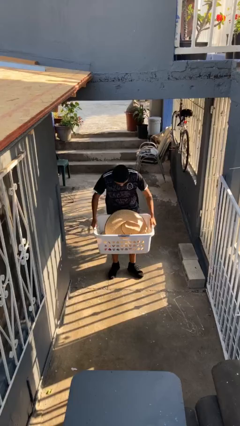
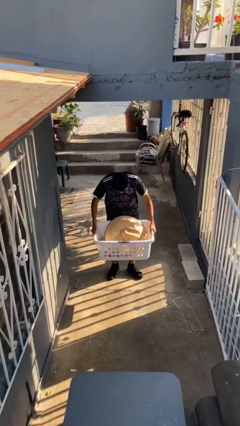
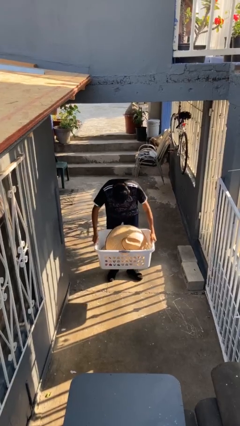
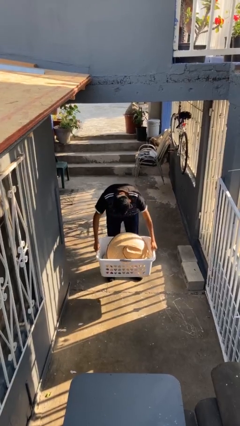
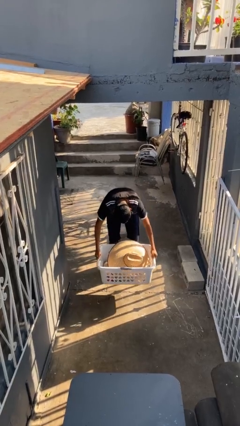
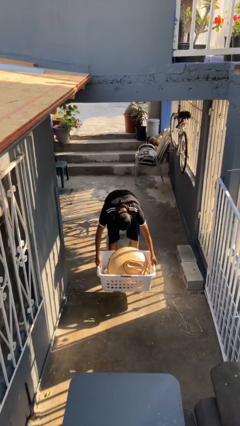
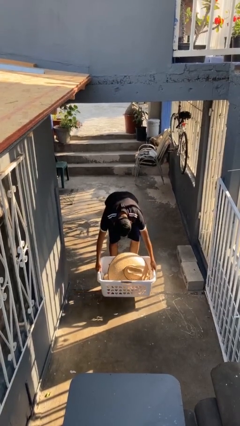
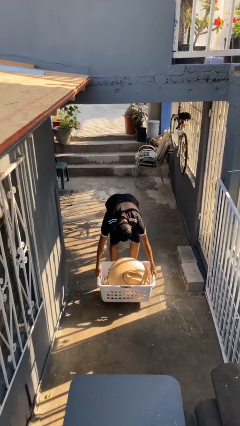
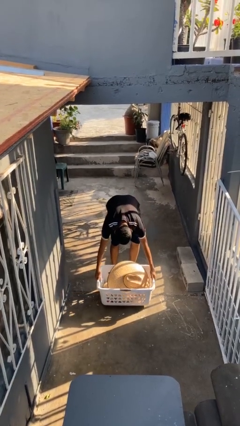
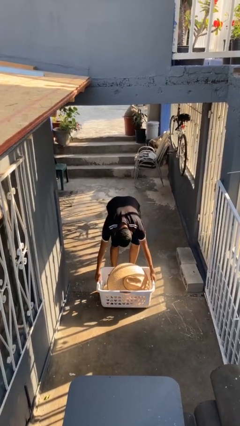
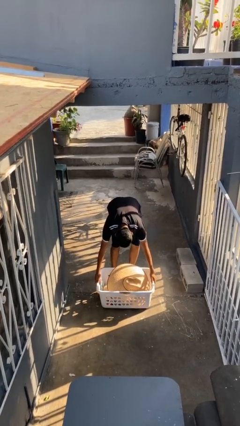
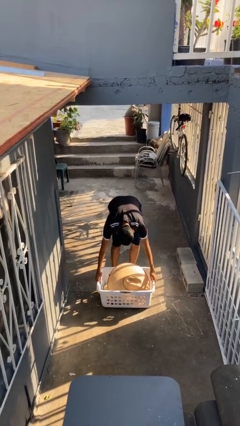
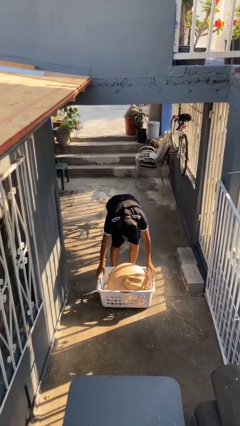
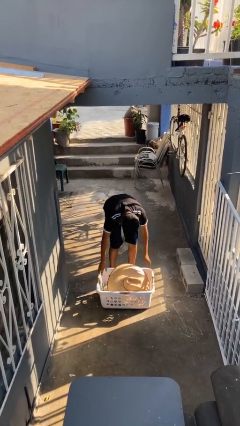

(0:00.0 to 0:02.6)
person puts down object on floor

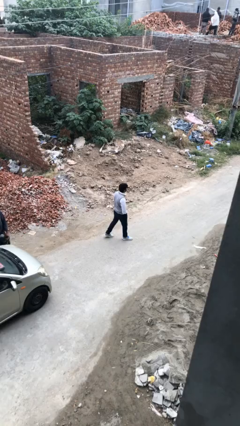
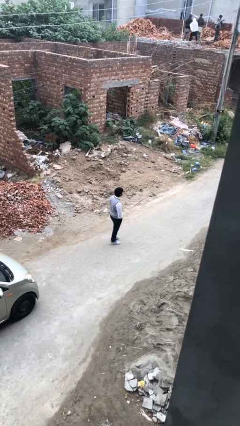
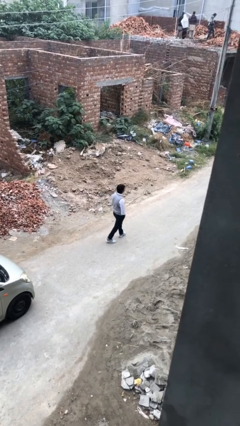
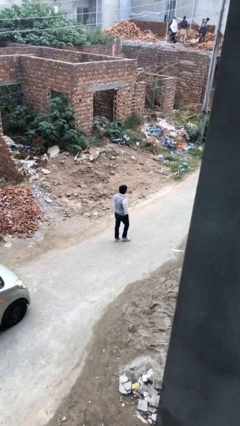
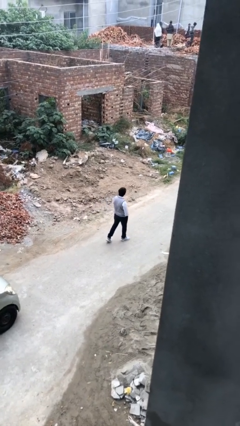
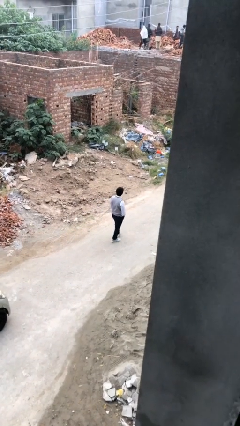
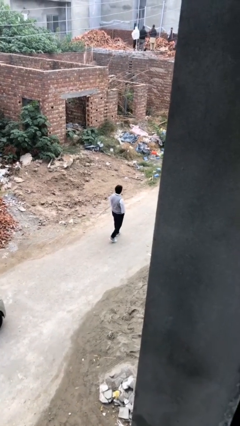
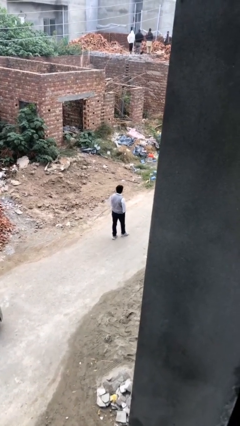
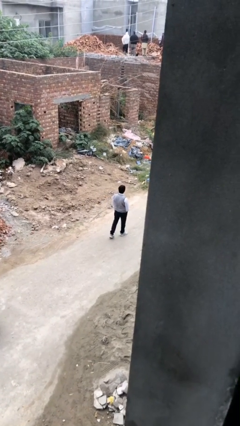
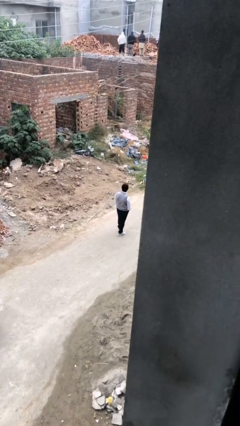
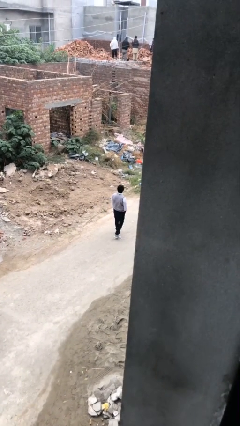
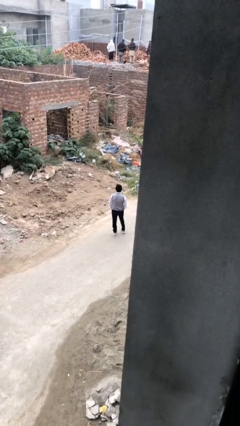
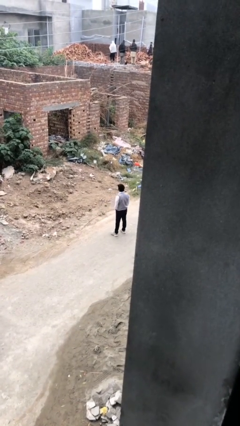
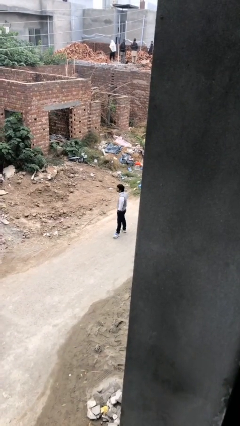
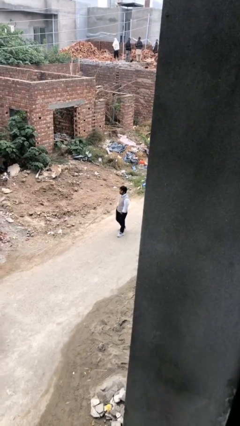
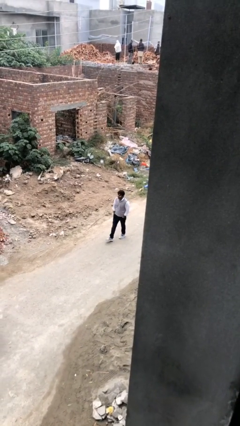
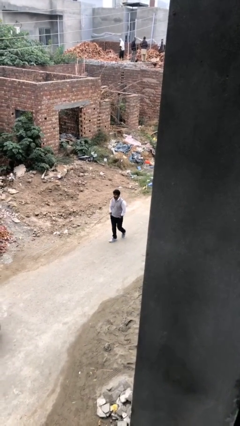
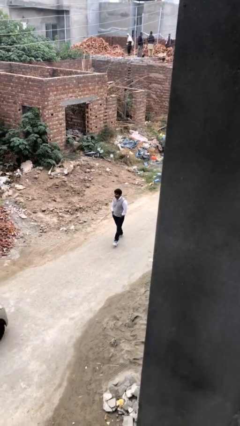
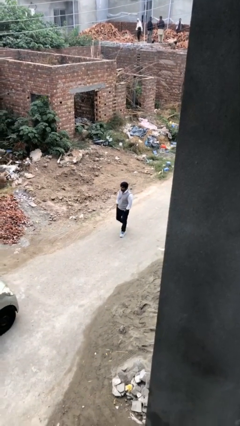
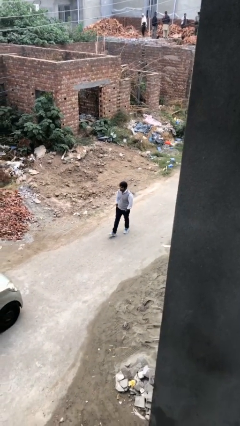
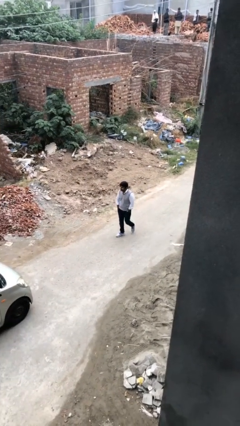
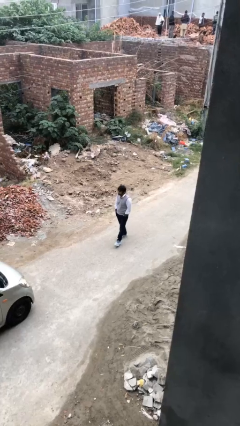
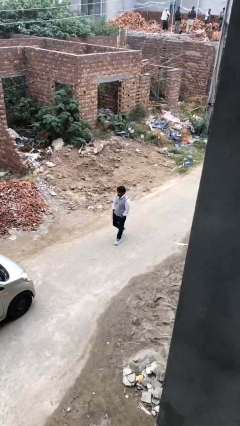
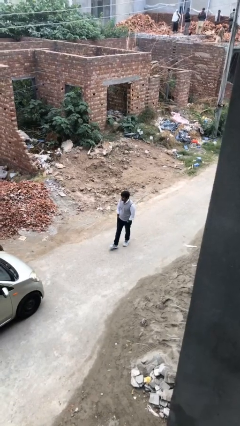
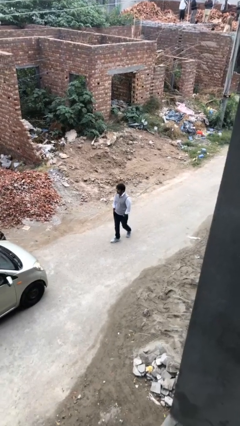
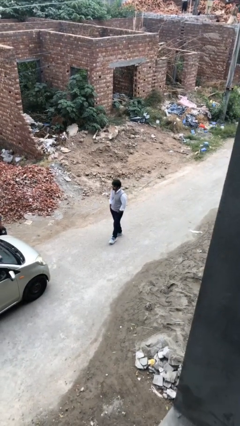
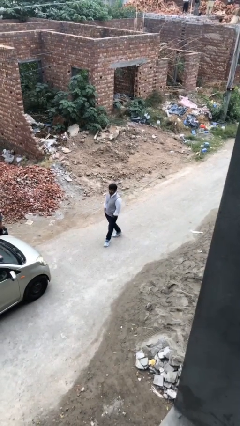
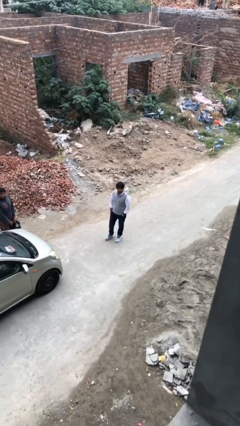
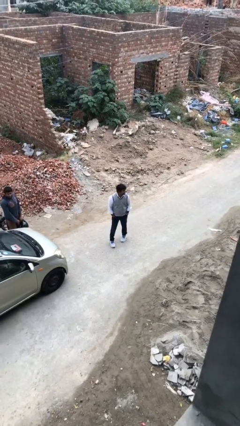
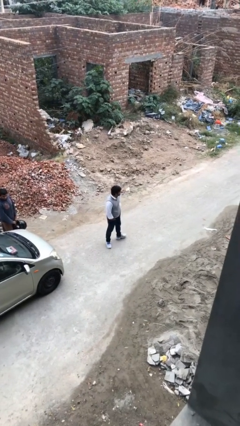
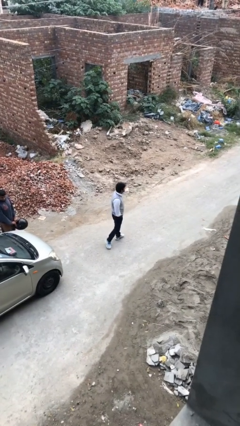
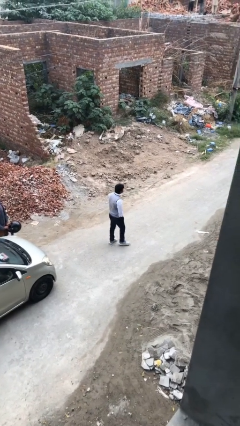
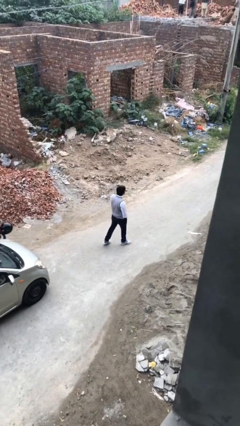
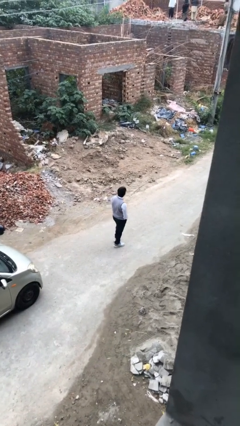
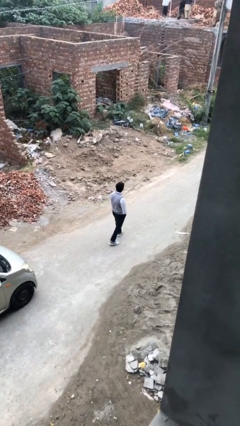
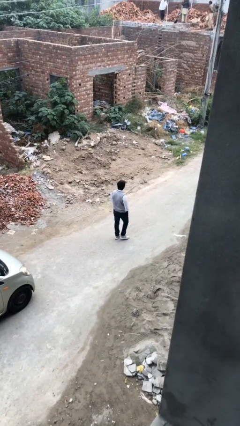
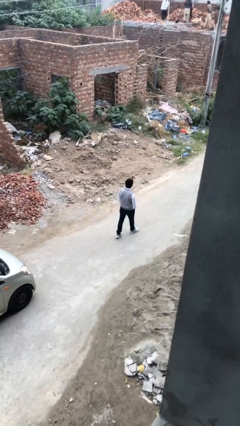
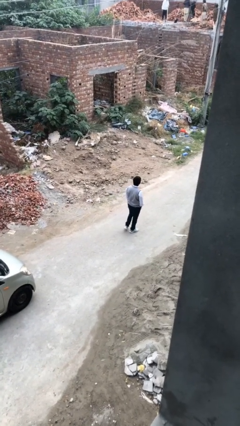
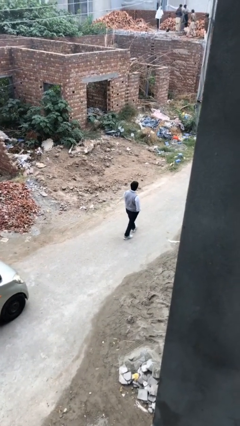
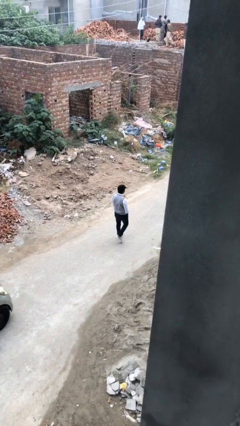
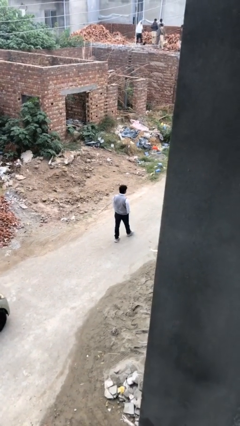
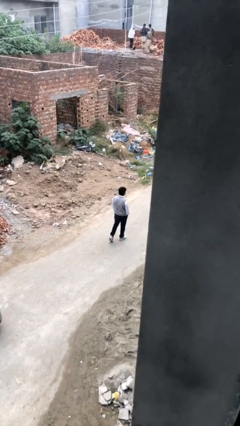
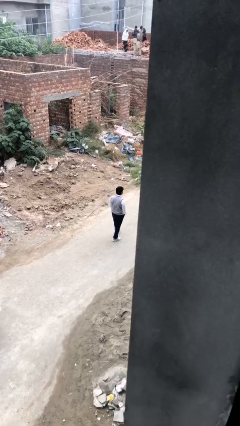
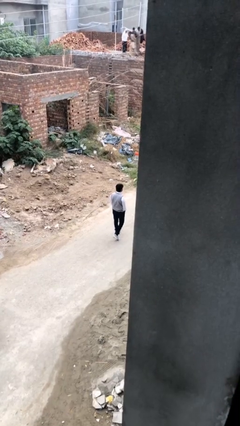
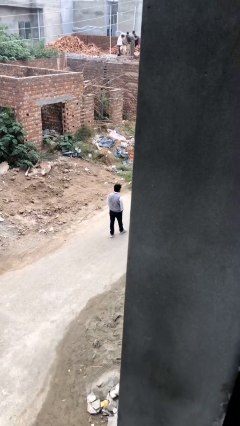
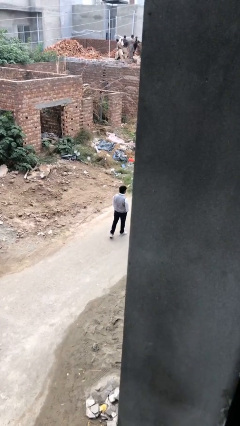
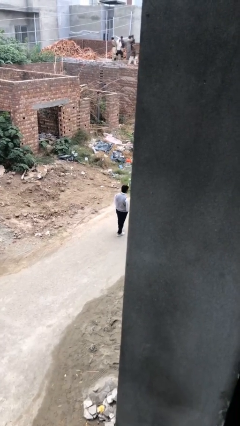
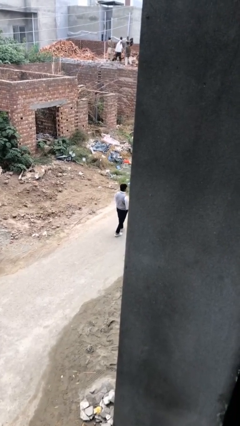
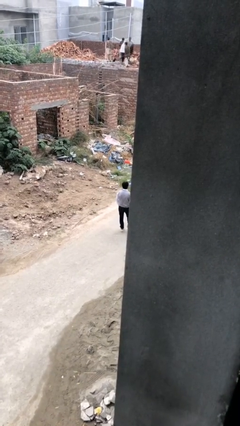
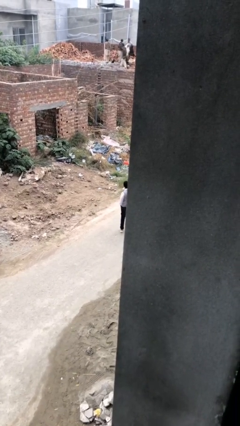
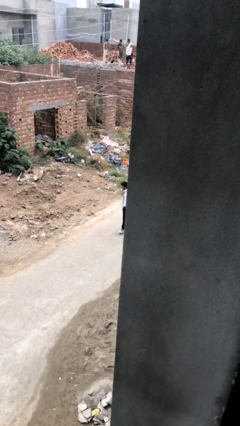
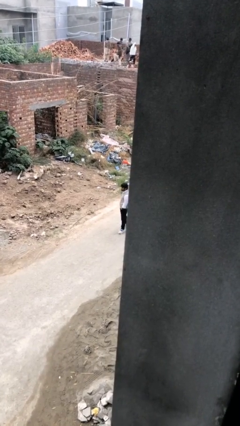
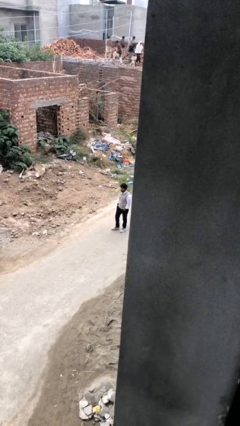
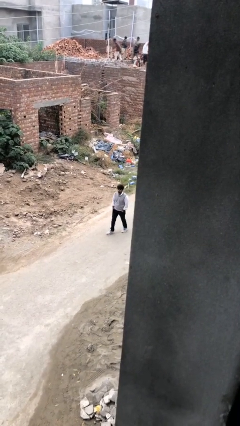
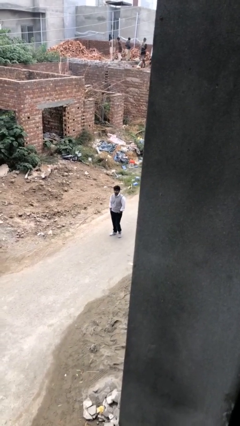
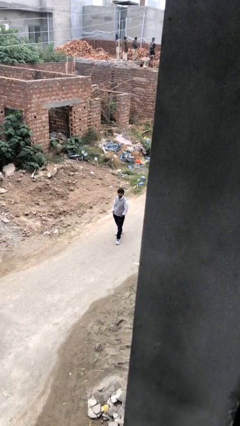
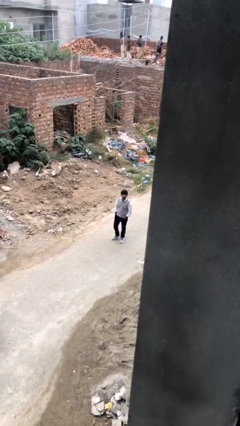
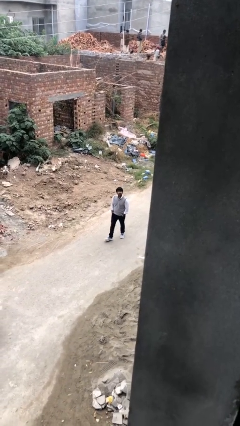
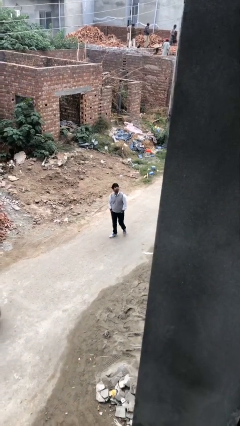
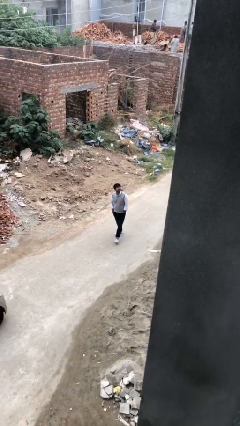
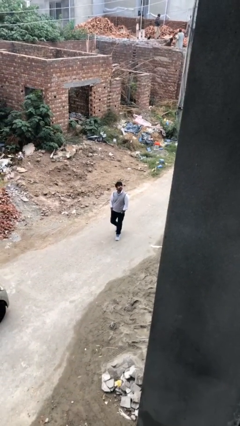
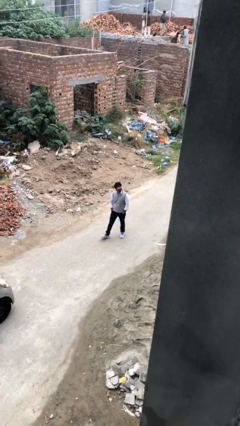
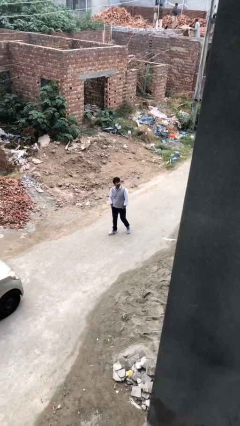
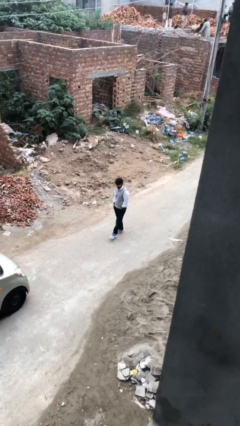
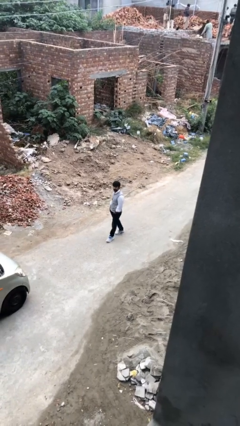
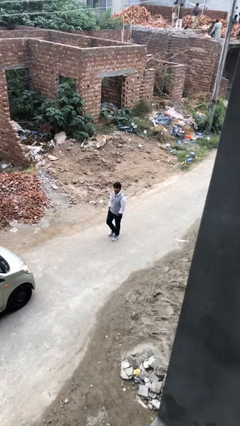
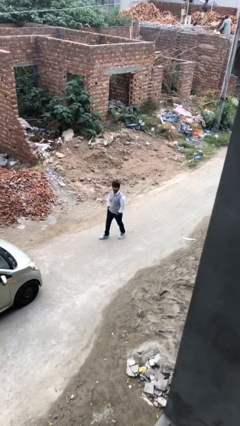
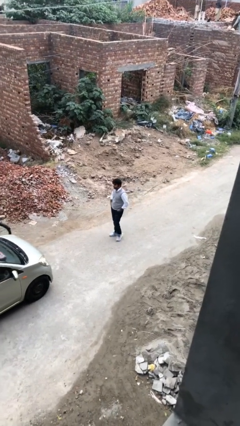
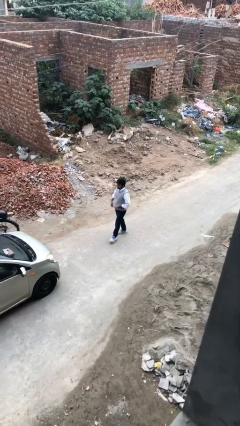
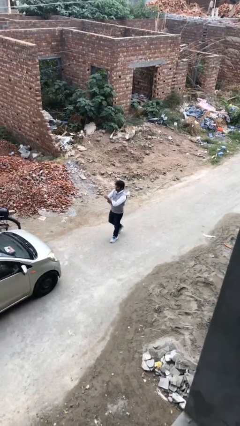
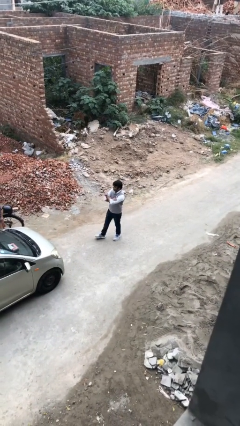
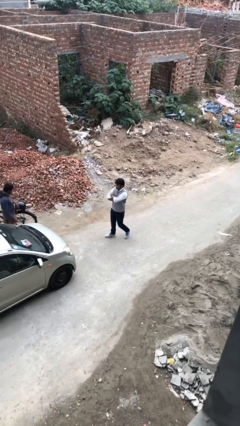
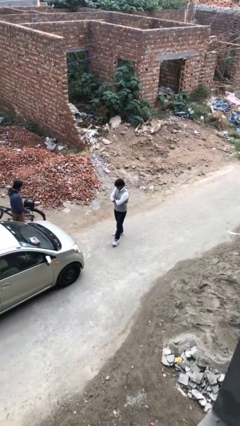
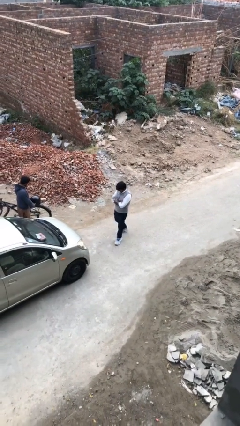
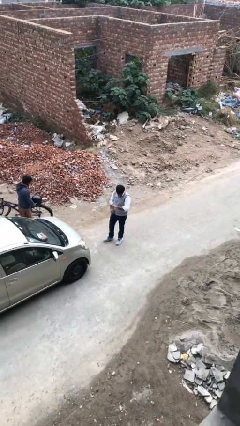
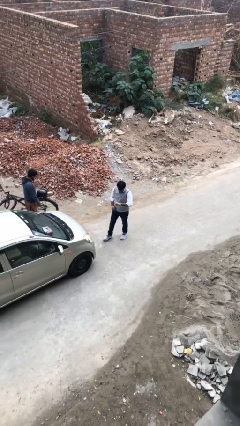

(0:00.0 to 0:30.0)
person walks

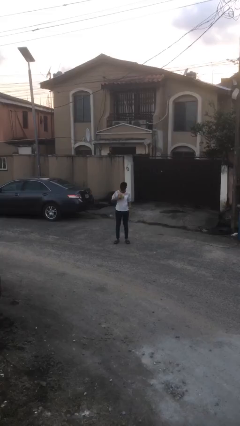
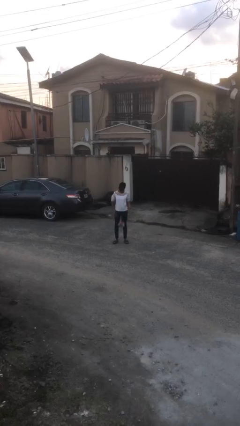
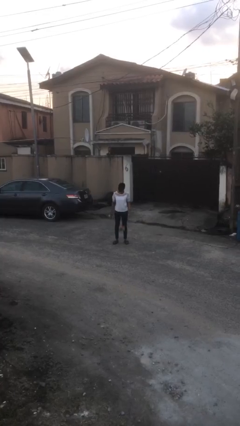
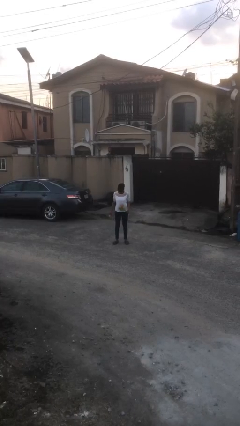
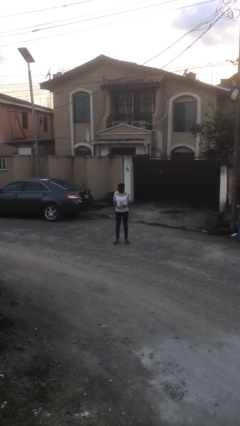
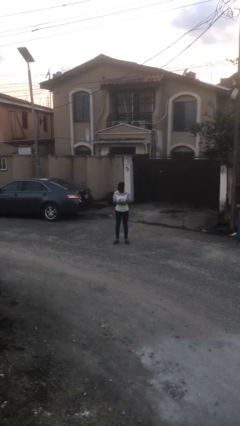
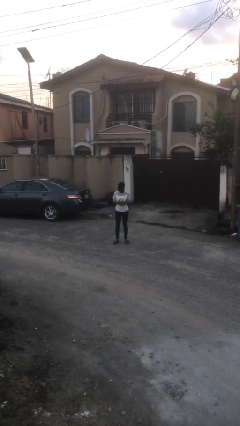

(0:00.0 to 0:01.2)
person bounces ball on floor
